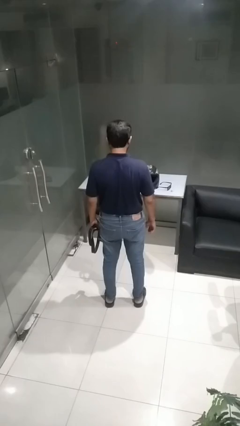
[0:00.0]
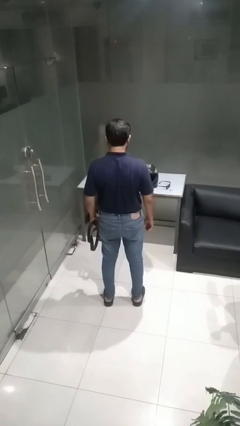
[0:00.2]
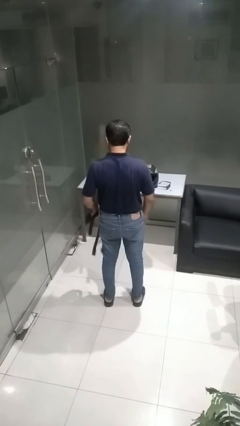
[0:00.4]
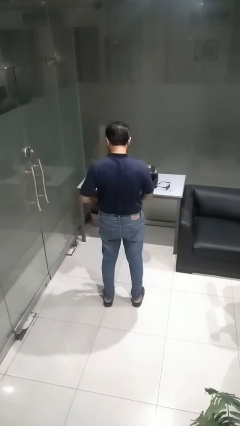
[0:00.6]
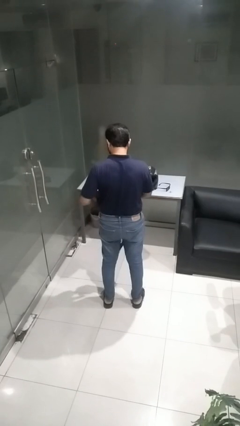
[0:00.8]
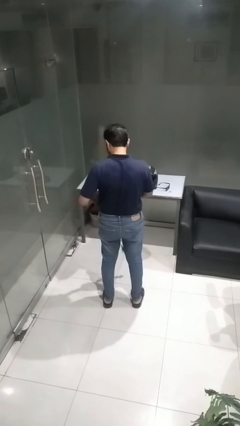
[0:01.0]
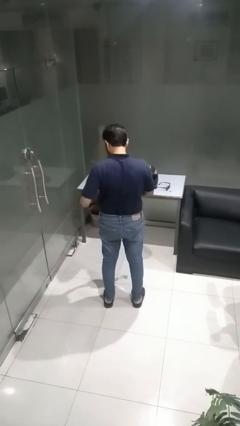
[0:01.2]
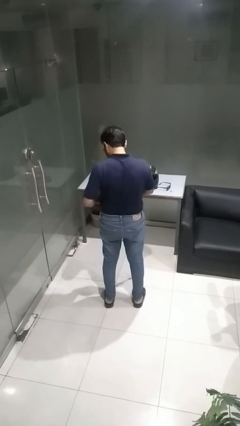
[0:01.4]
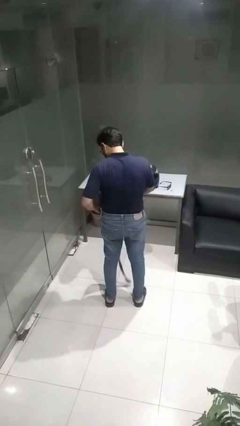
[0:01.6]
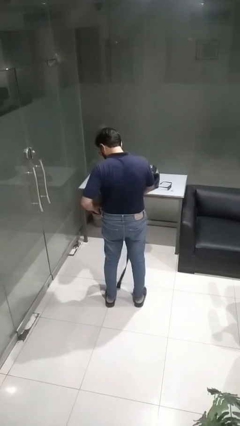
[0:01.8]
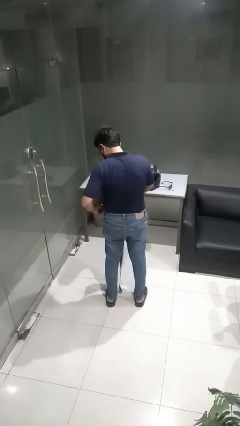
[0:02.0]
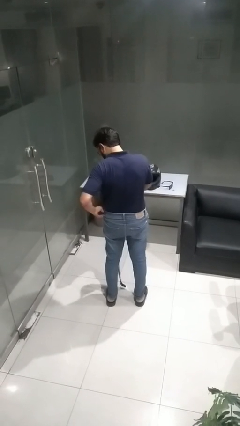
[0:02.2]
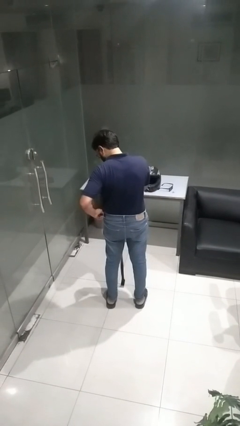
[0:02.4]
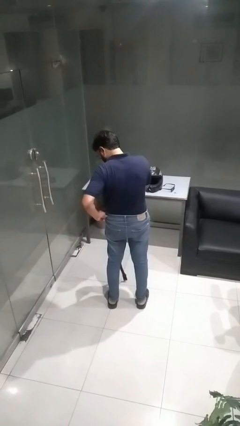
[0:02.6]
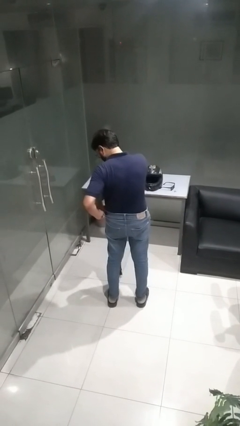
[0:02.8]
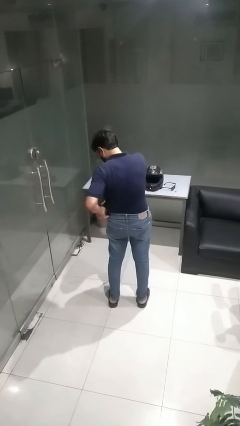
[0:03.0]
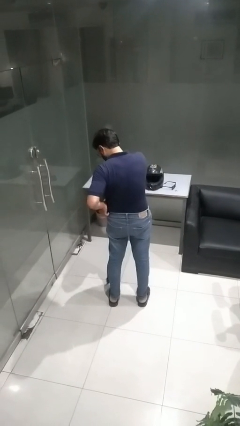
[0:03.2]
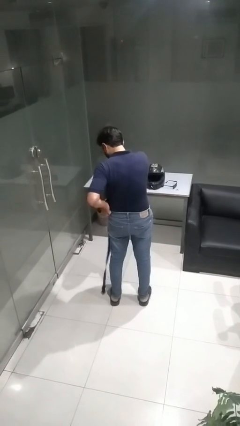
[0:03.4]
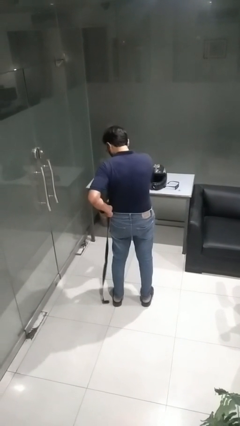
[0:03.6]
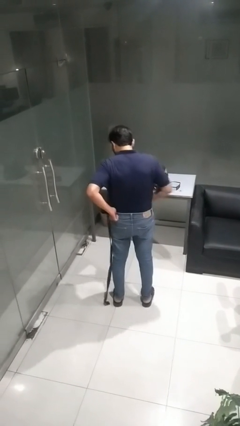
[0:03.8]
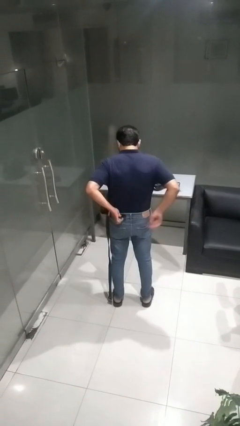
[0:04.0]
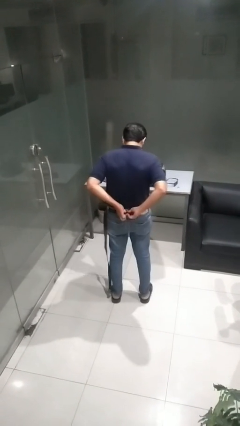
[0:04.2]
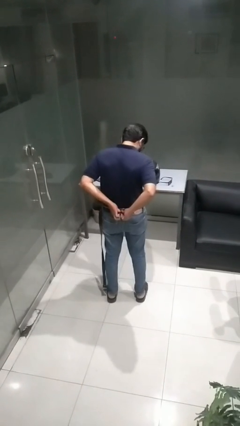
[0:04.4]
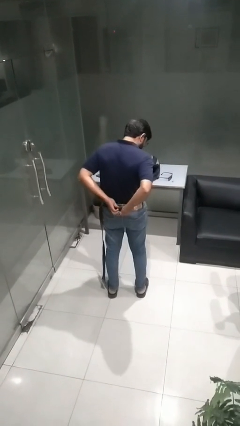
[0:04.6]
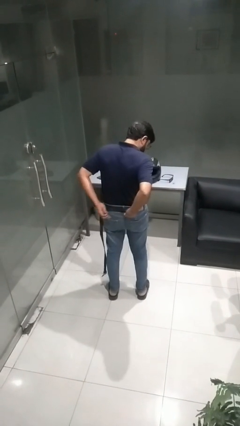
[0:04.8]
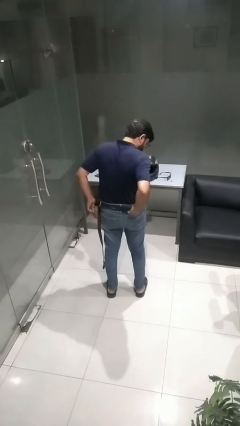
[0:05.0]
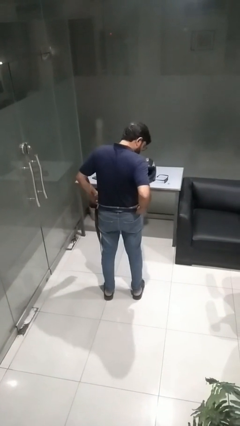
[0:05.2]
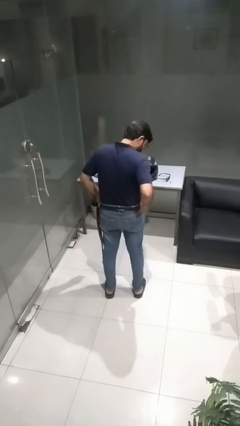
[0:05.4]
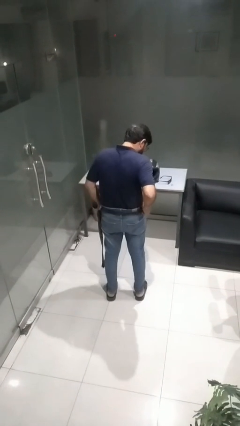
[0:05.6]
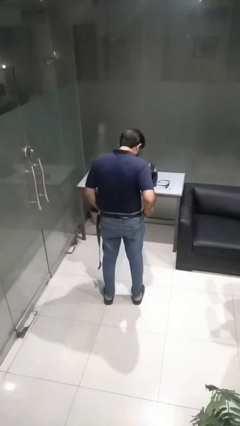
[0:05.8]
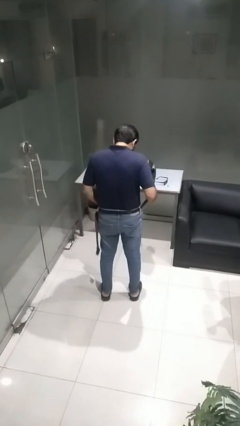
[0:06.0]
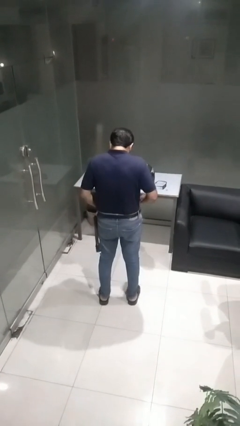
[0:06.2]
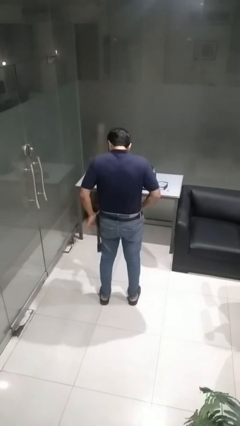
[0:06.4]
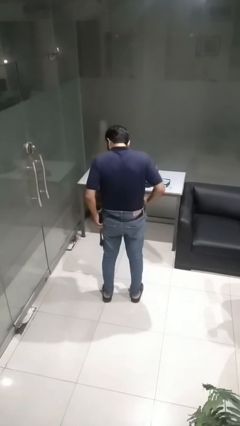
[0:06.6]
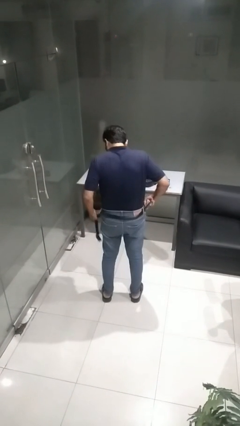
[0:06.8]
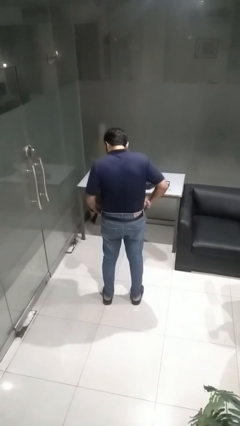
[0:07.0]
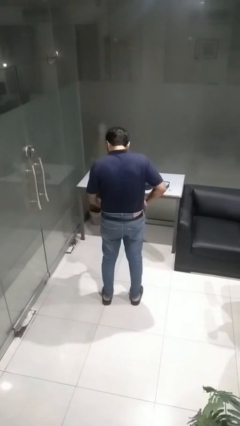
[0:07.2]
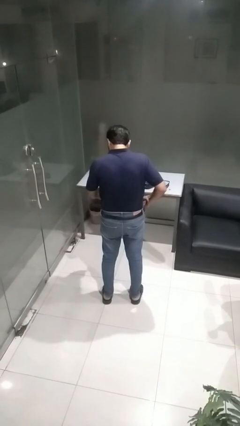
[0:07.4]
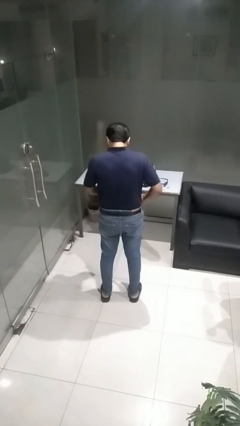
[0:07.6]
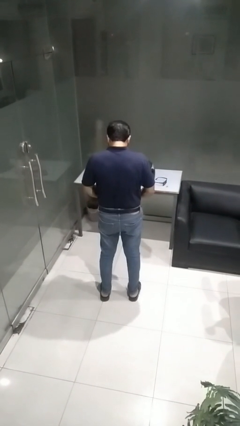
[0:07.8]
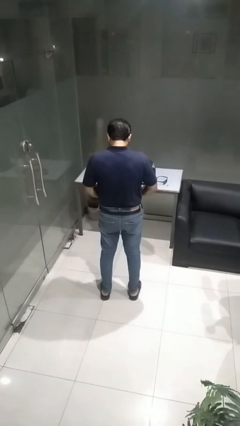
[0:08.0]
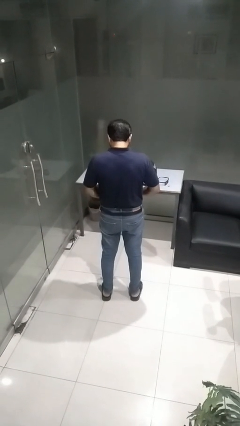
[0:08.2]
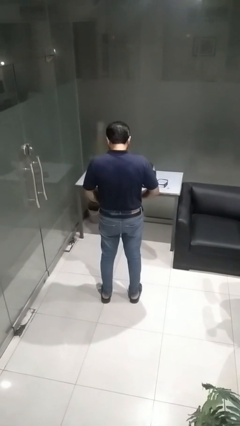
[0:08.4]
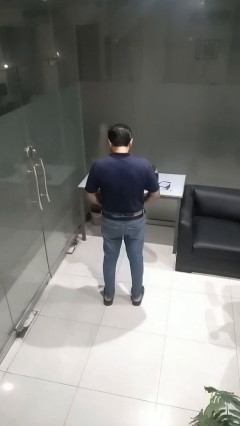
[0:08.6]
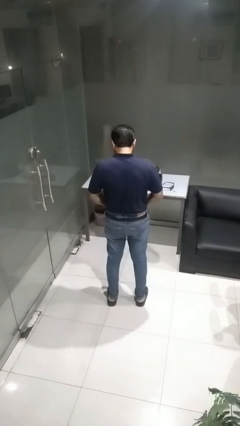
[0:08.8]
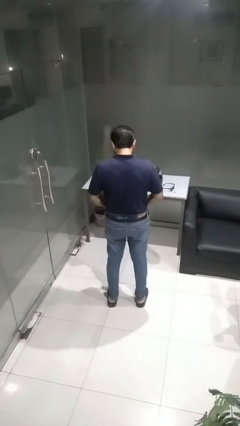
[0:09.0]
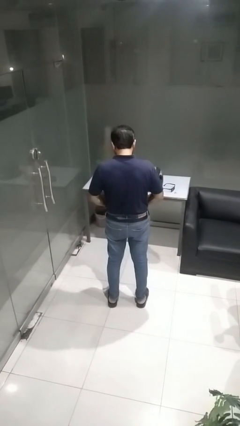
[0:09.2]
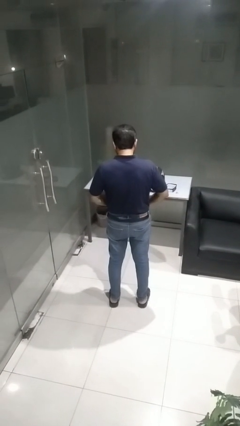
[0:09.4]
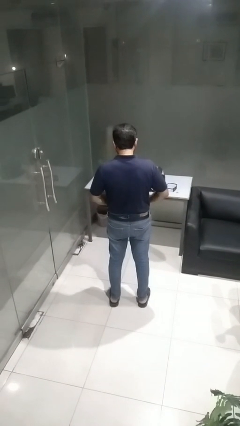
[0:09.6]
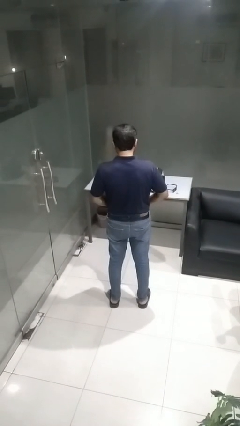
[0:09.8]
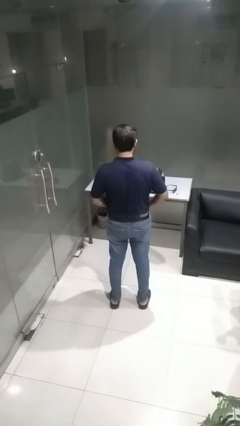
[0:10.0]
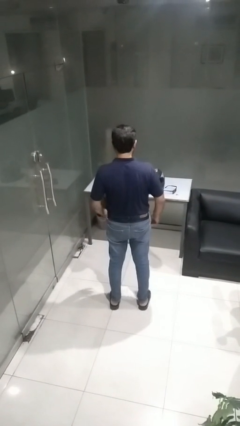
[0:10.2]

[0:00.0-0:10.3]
person puts on belt

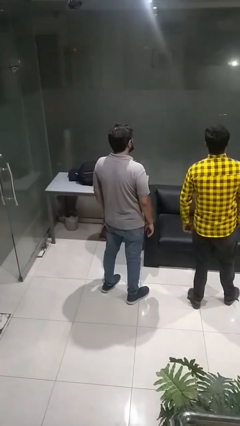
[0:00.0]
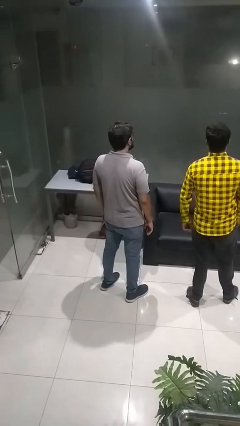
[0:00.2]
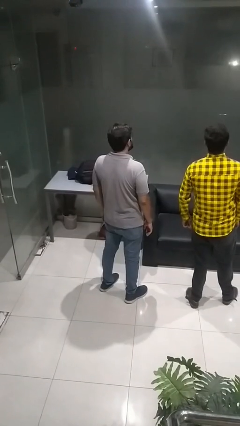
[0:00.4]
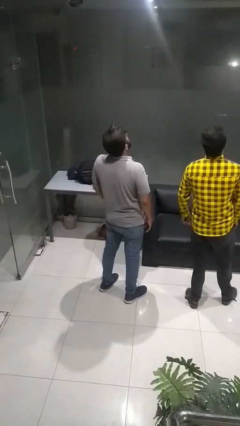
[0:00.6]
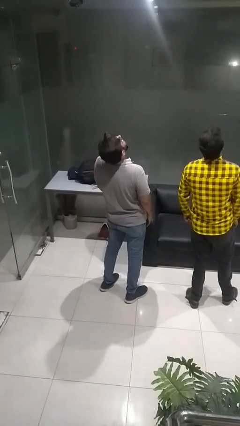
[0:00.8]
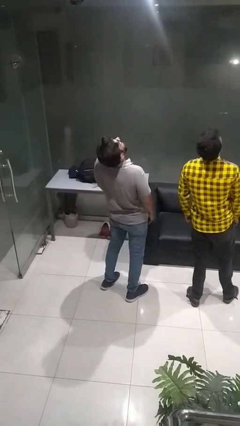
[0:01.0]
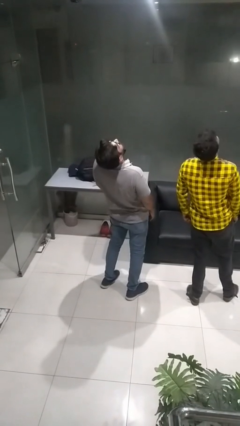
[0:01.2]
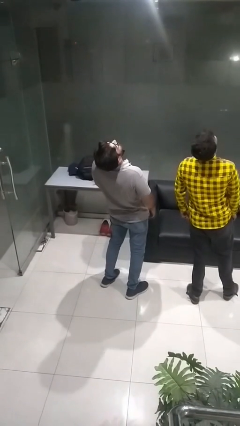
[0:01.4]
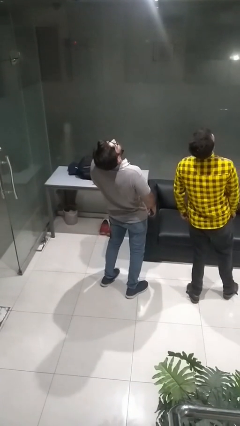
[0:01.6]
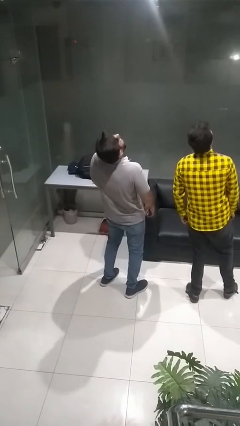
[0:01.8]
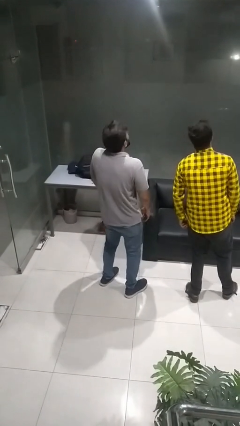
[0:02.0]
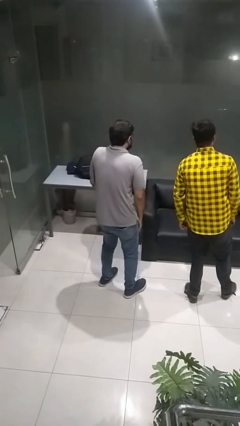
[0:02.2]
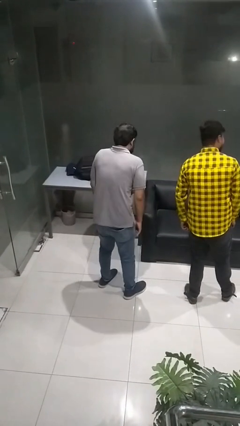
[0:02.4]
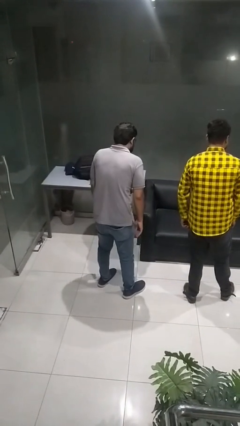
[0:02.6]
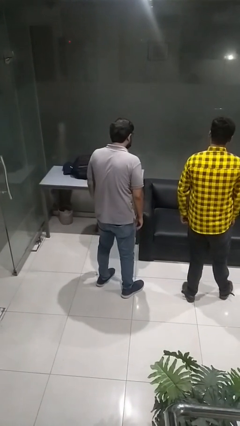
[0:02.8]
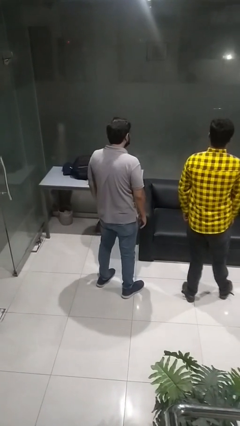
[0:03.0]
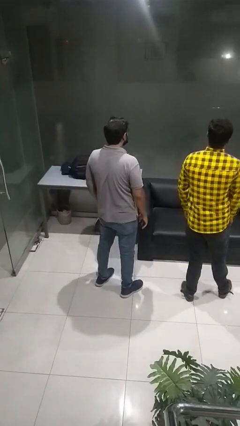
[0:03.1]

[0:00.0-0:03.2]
person laughs with person

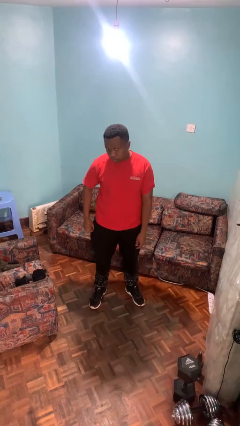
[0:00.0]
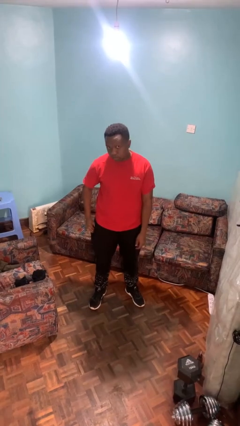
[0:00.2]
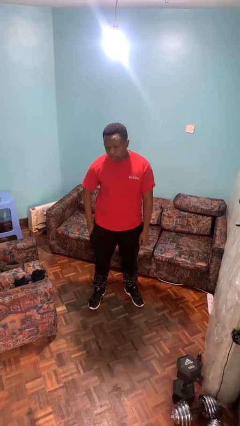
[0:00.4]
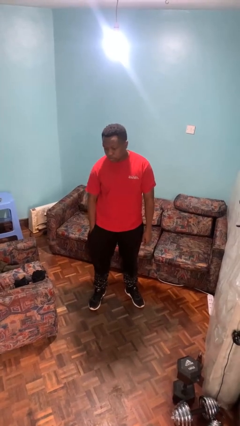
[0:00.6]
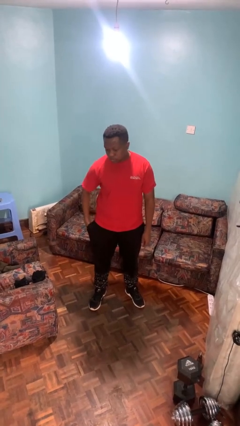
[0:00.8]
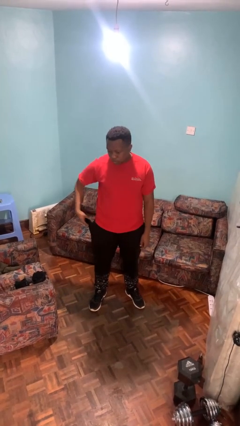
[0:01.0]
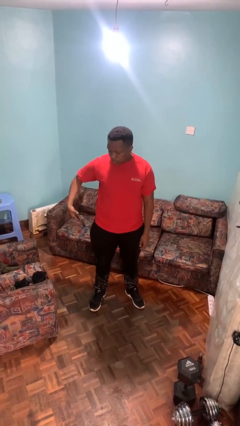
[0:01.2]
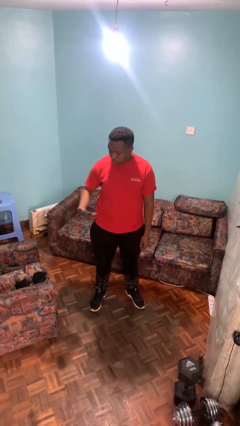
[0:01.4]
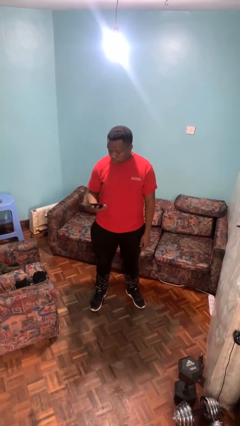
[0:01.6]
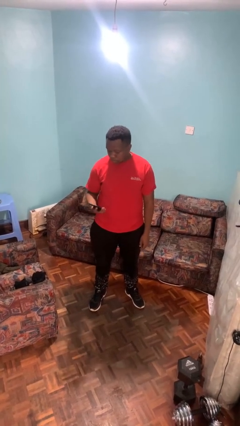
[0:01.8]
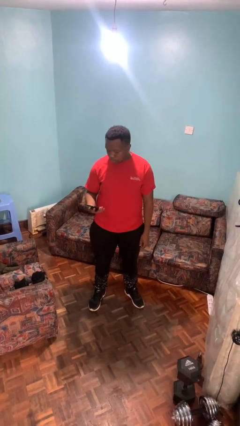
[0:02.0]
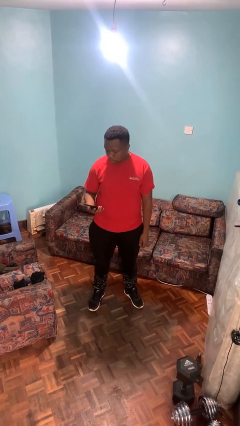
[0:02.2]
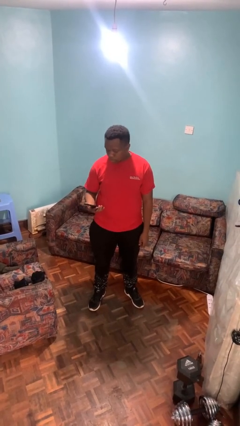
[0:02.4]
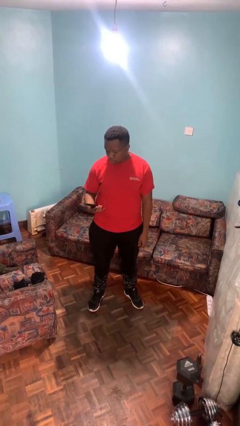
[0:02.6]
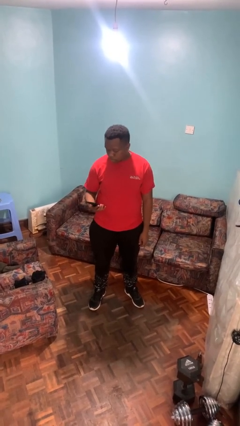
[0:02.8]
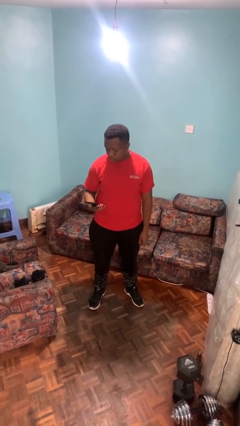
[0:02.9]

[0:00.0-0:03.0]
person takes phone from pocket

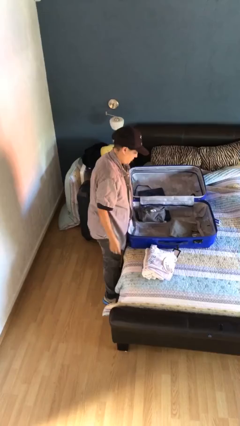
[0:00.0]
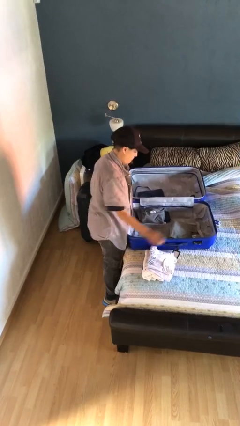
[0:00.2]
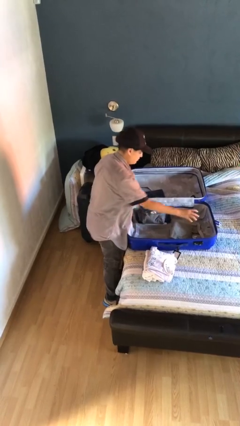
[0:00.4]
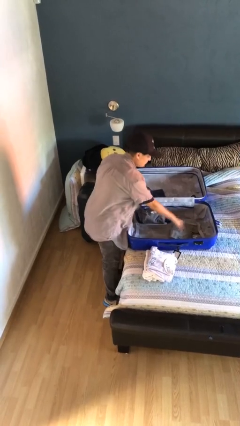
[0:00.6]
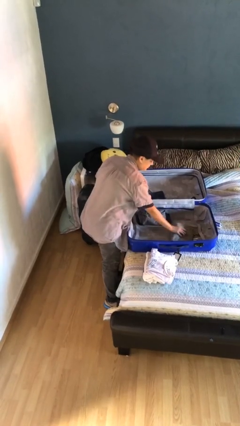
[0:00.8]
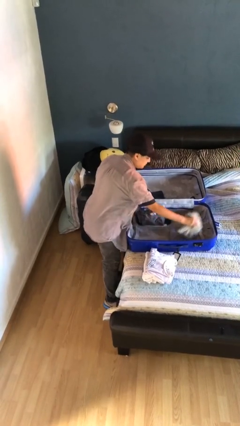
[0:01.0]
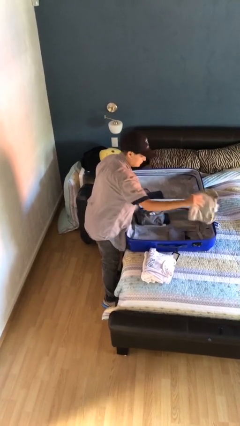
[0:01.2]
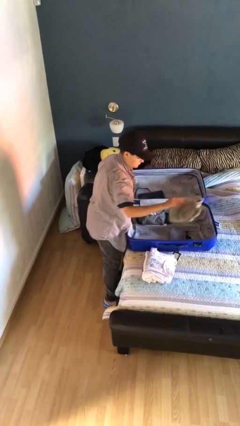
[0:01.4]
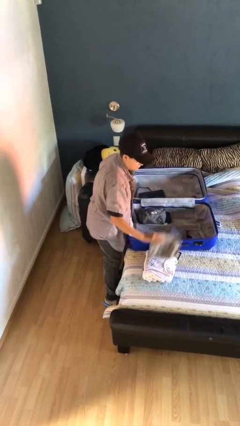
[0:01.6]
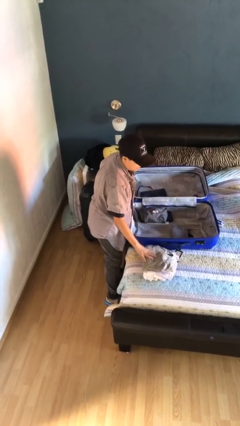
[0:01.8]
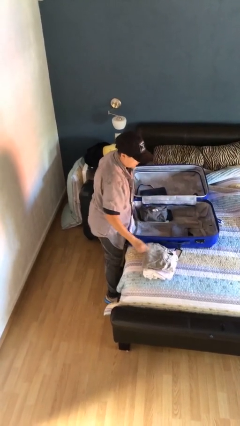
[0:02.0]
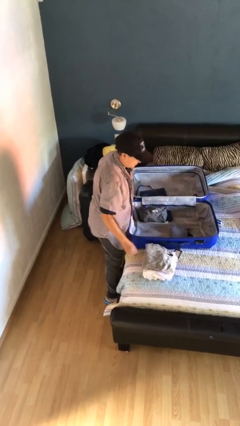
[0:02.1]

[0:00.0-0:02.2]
person unloads clothes from suitcase
